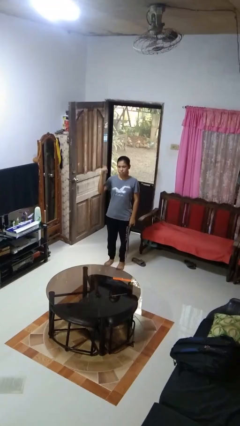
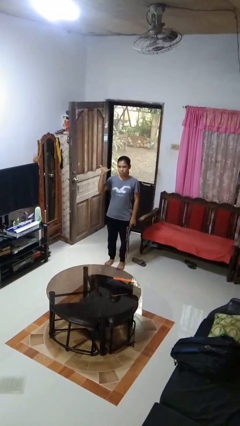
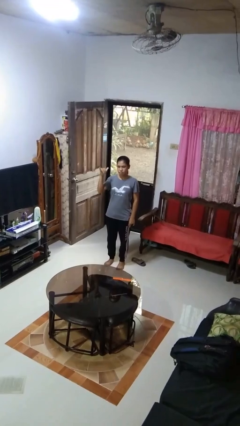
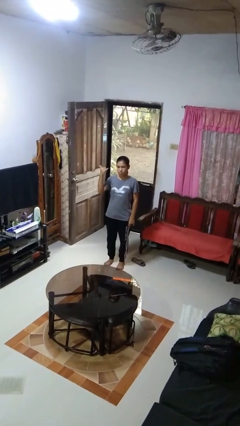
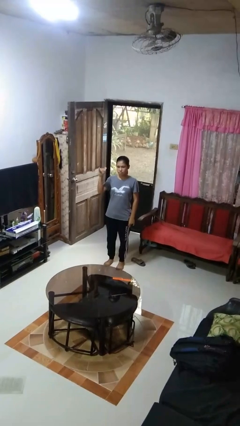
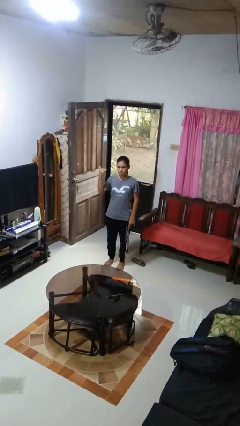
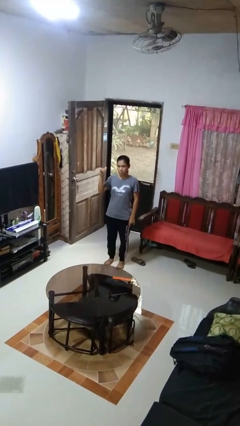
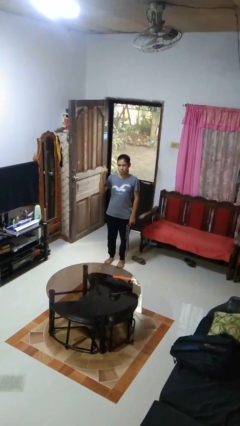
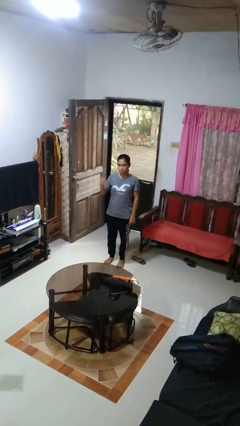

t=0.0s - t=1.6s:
person gestures hang loose

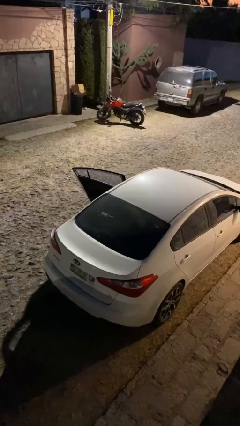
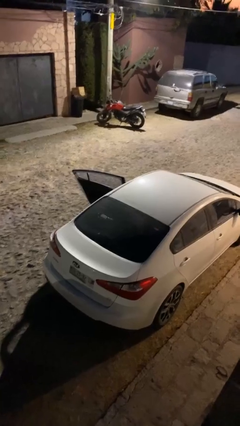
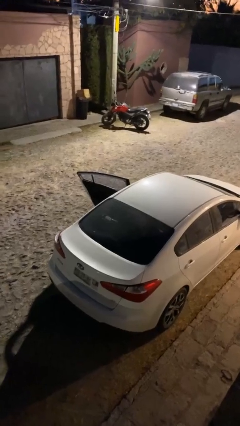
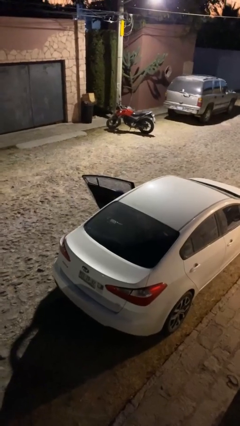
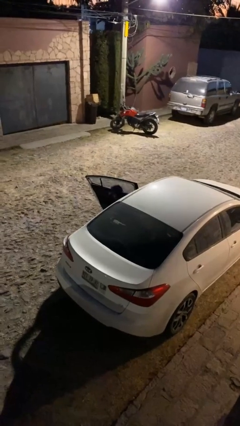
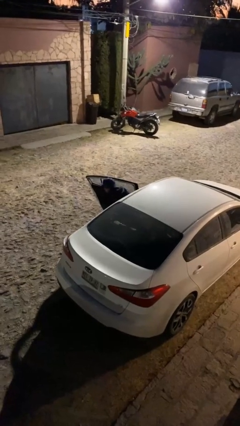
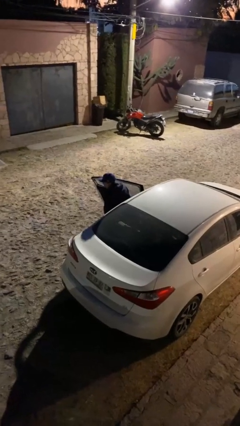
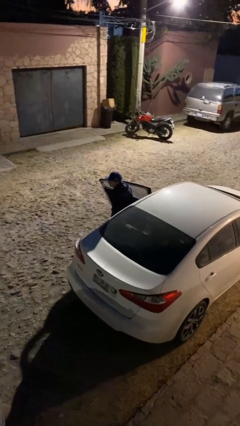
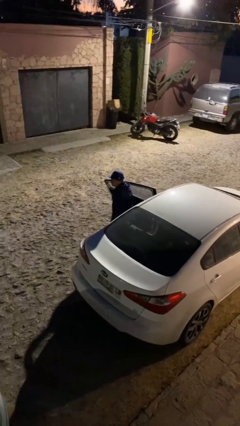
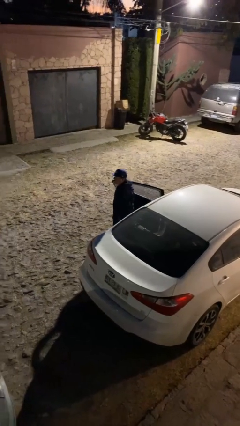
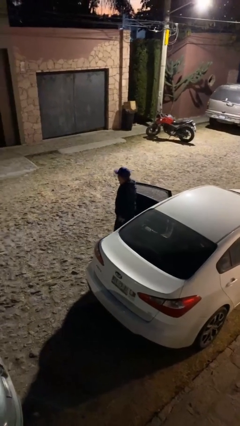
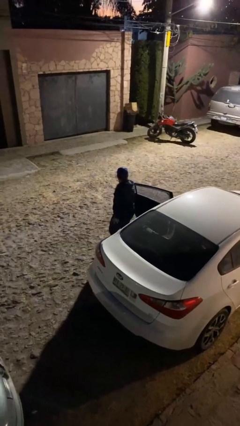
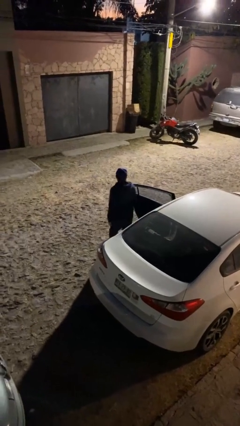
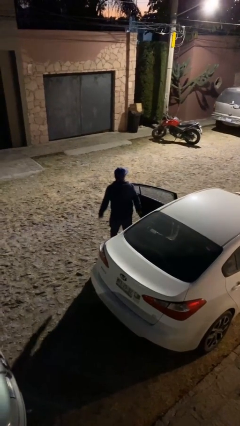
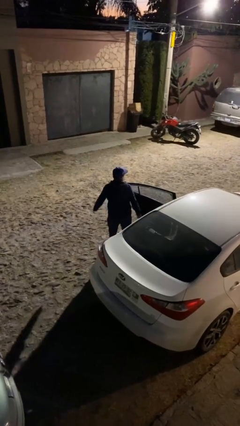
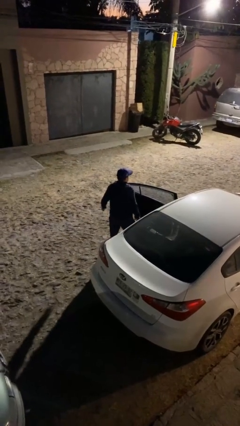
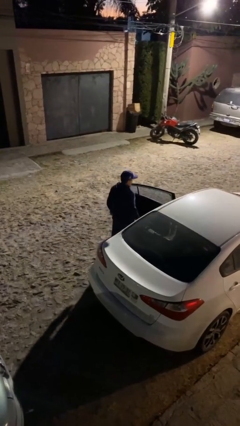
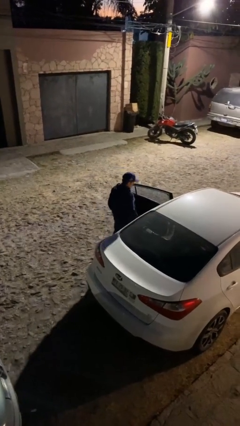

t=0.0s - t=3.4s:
person exits car

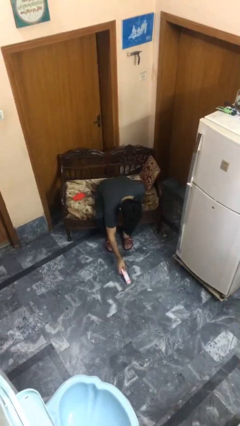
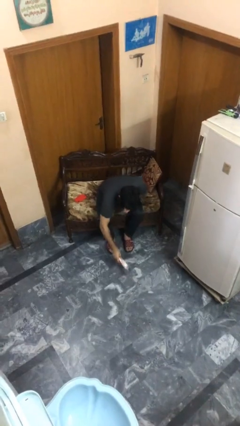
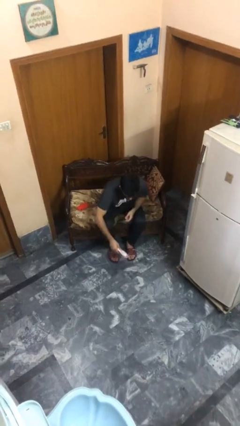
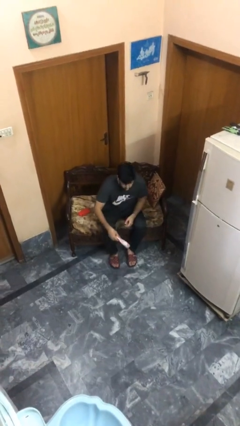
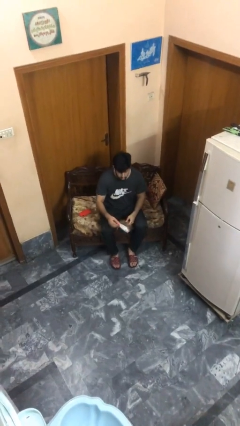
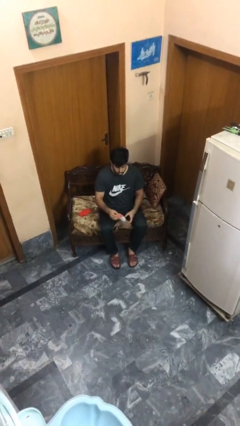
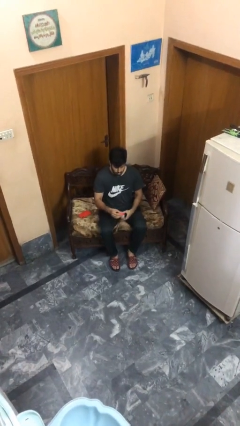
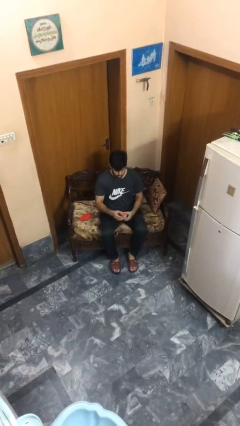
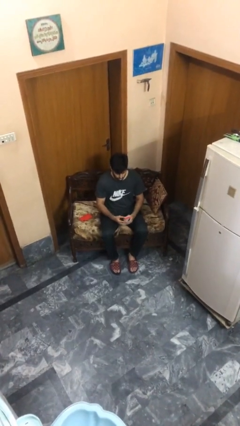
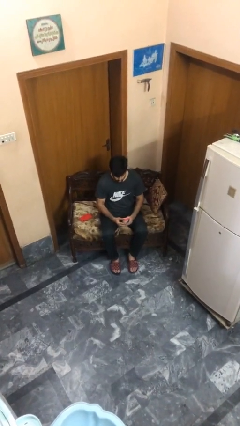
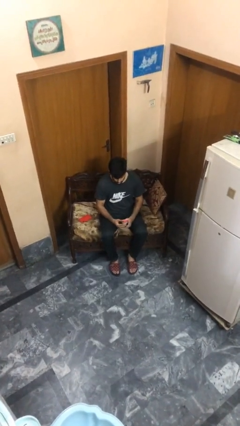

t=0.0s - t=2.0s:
person picks up object from floor

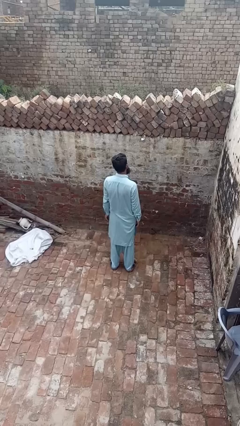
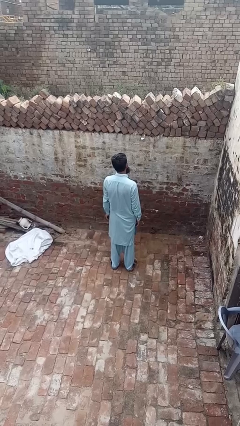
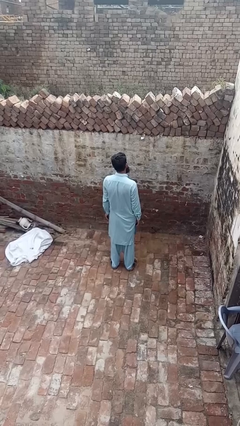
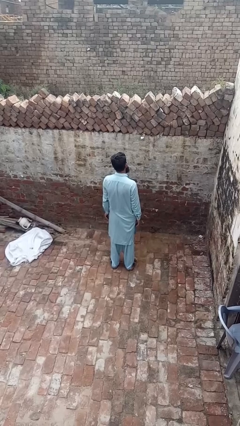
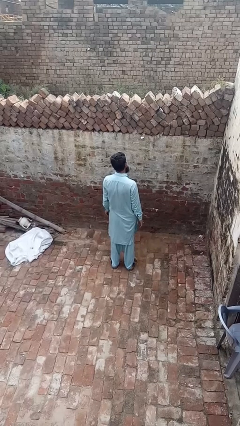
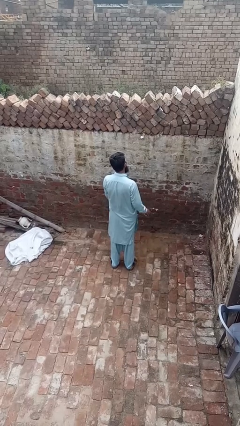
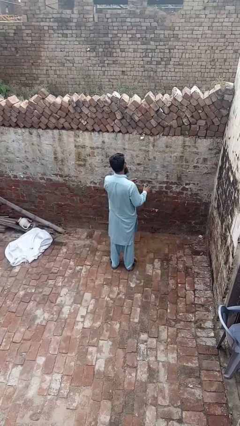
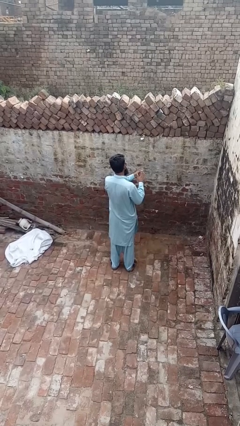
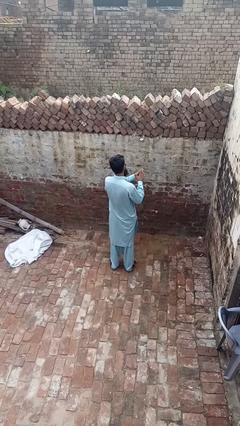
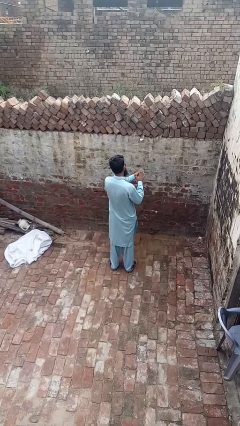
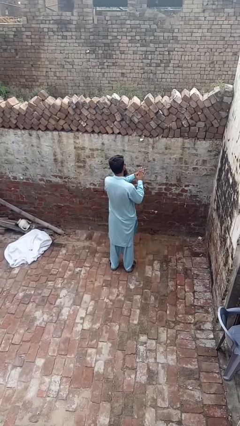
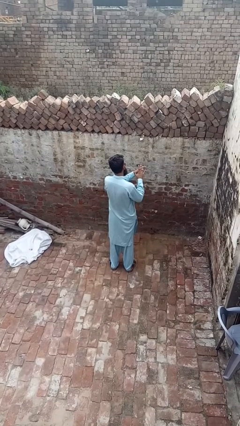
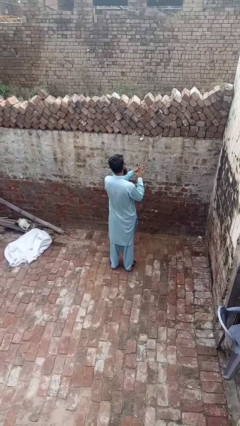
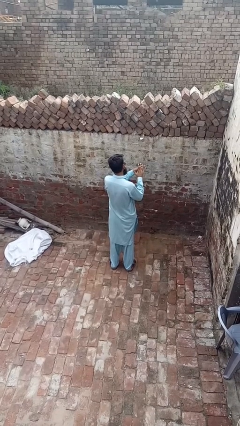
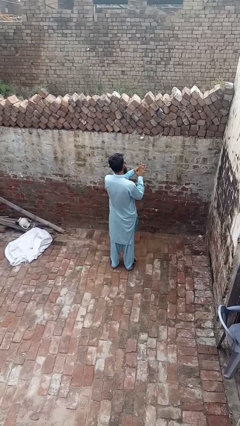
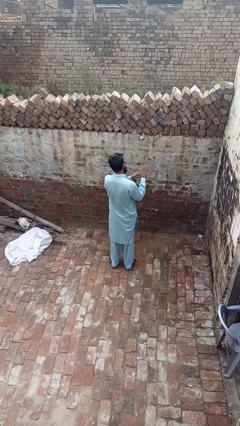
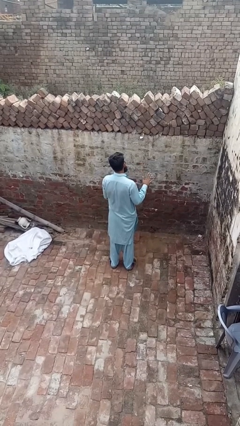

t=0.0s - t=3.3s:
person puts on ring

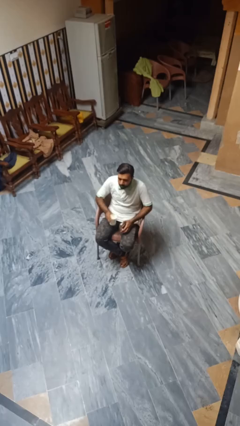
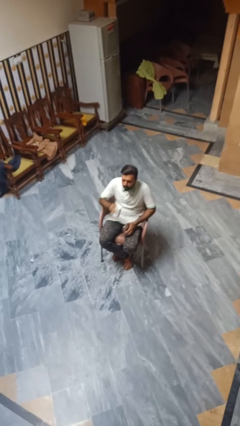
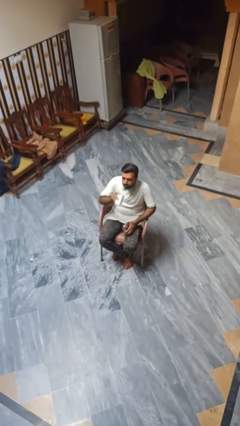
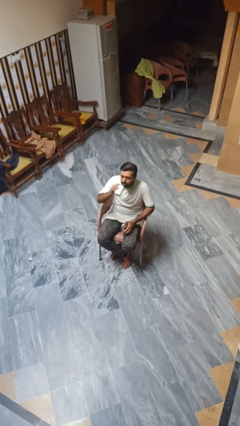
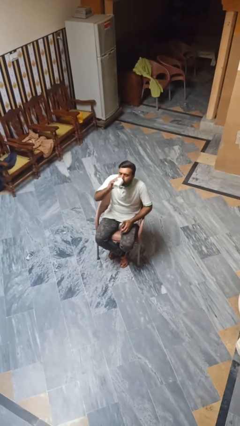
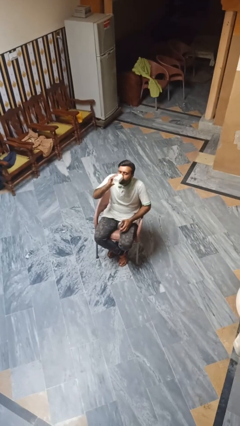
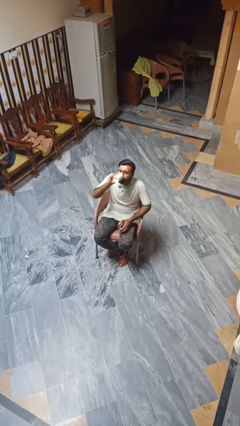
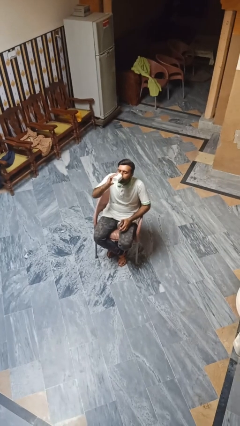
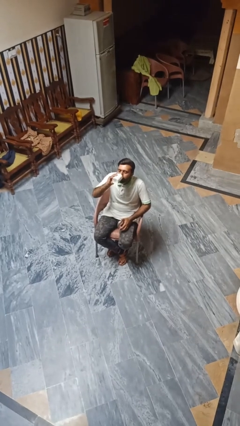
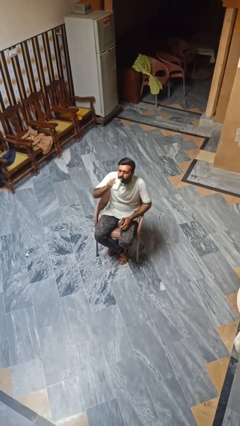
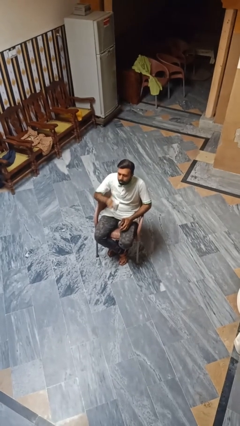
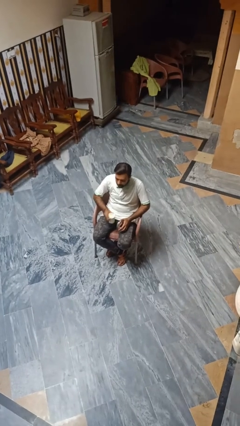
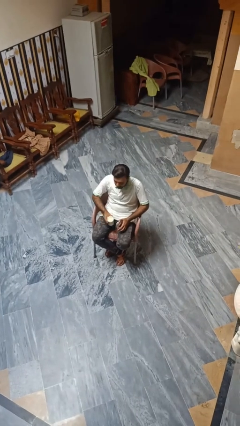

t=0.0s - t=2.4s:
person drinks from beverage can

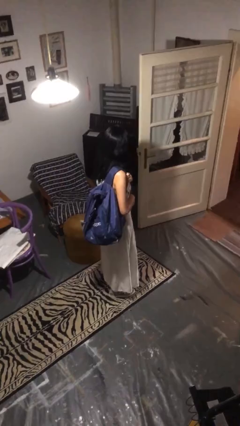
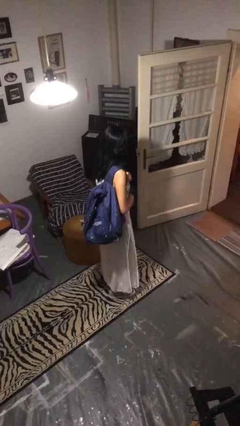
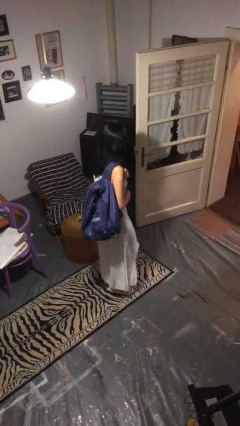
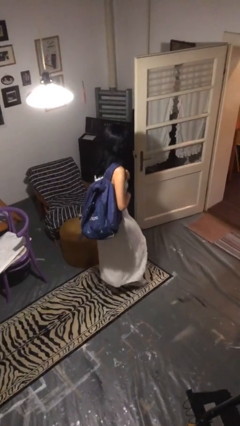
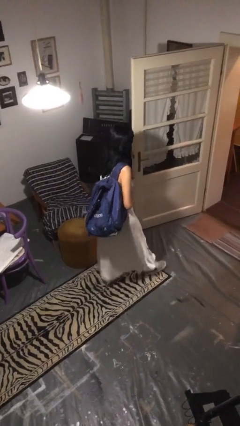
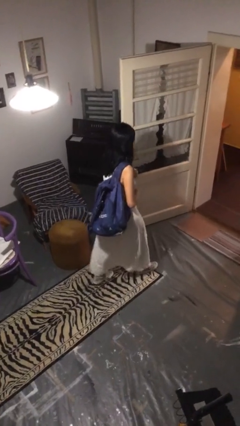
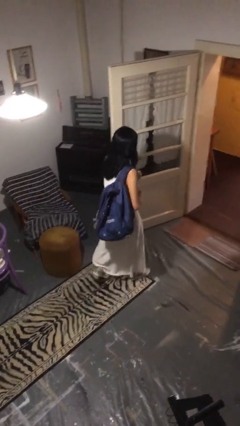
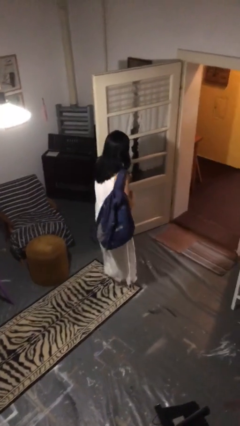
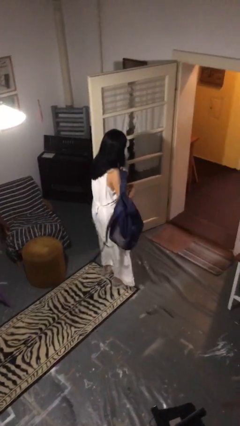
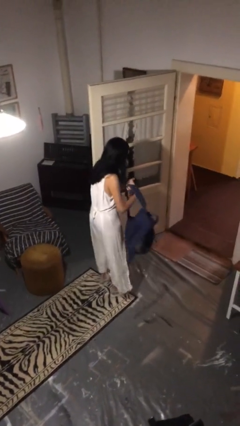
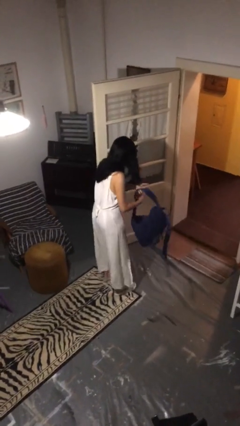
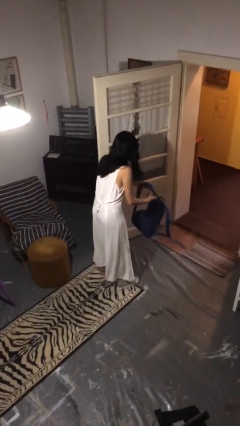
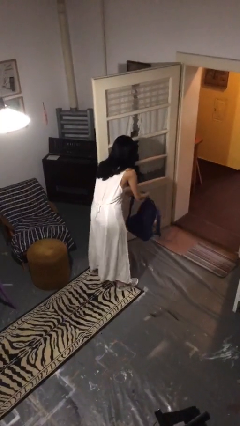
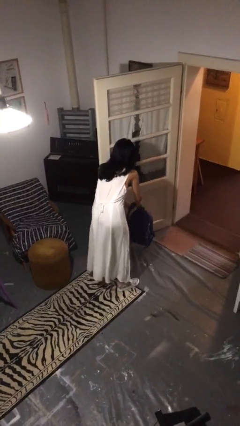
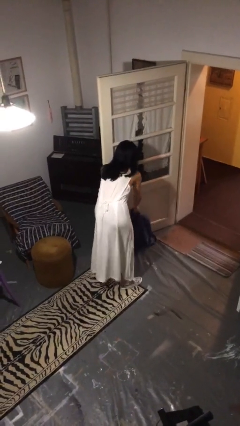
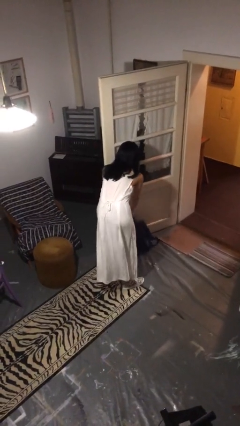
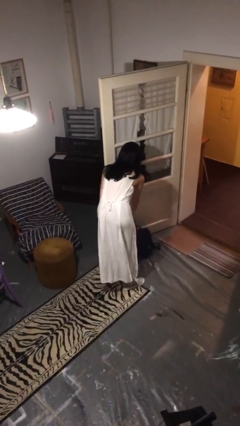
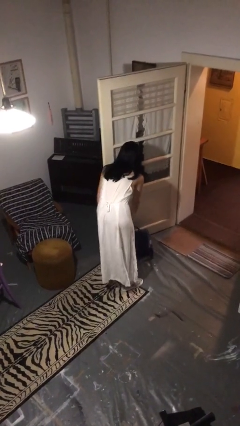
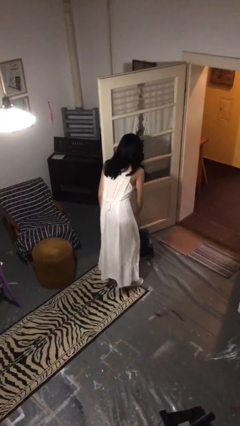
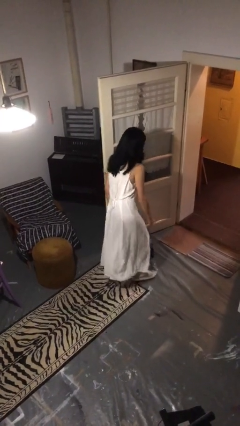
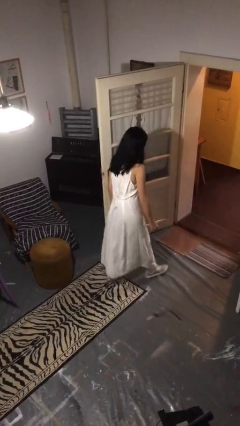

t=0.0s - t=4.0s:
person puts down object on floor

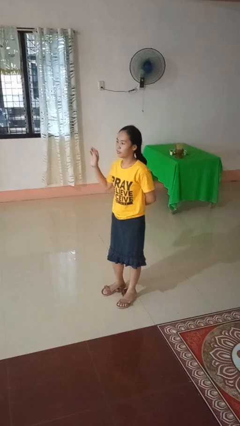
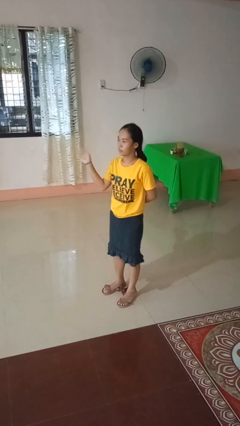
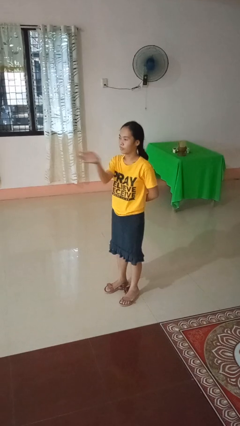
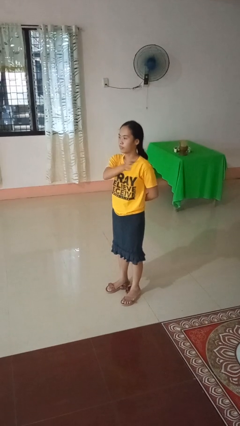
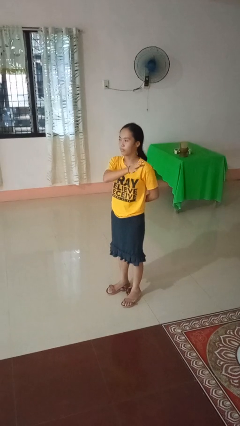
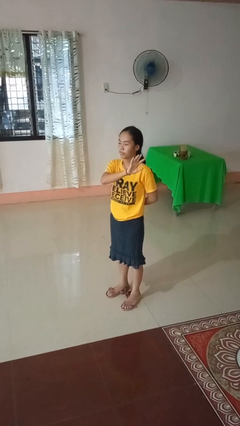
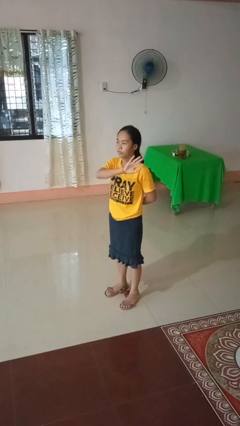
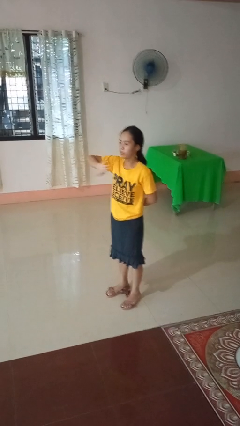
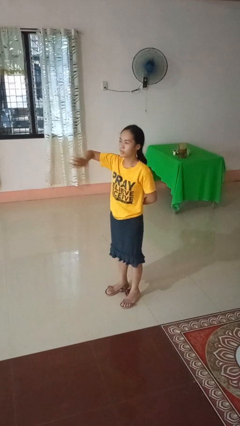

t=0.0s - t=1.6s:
person gestures swipe left
